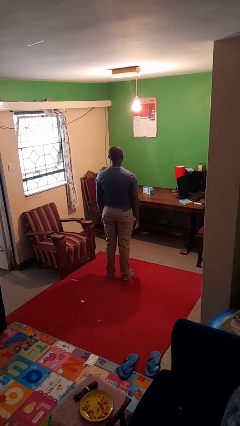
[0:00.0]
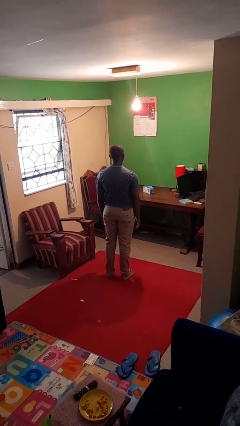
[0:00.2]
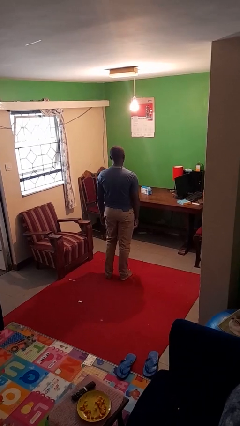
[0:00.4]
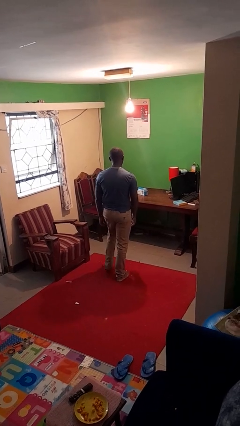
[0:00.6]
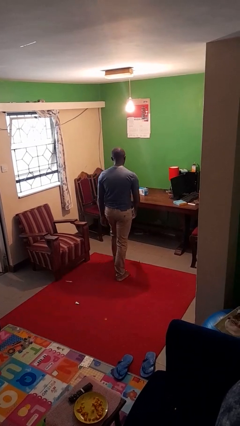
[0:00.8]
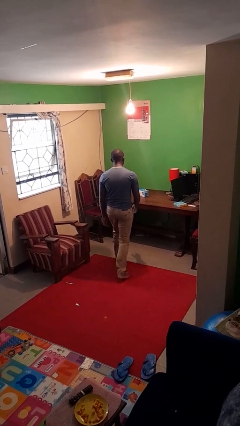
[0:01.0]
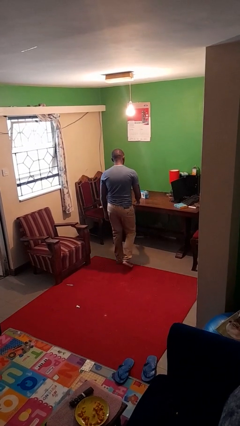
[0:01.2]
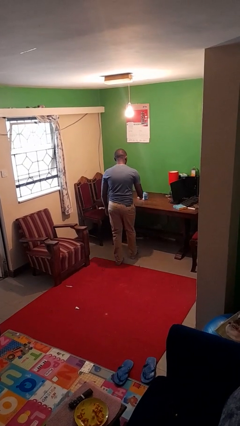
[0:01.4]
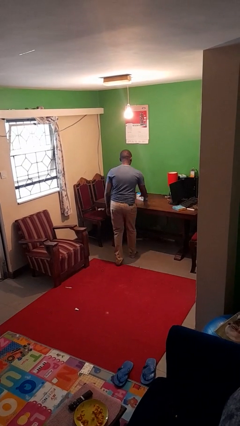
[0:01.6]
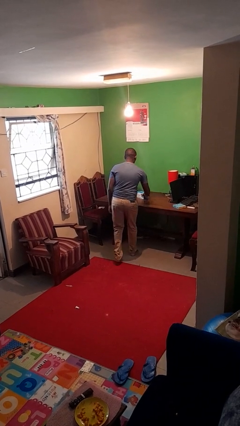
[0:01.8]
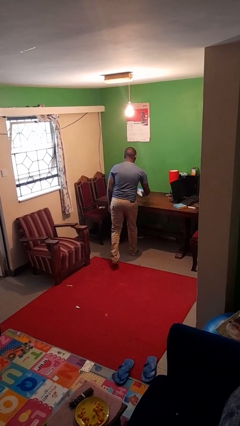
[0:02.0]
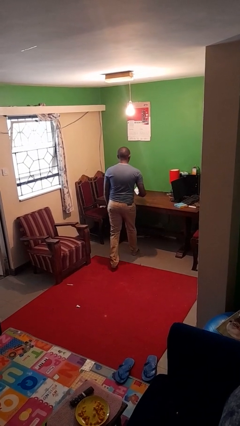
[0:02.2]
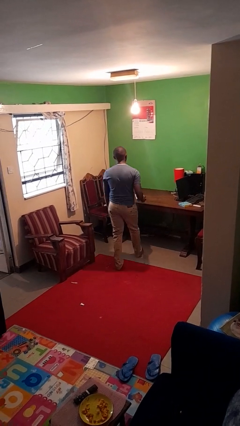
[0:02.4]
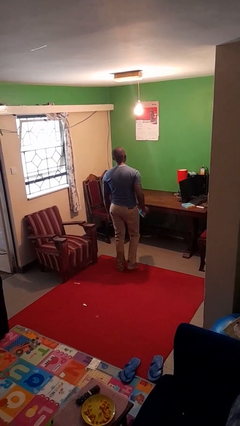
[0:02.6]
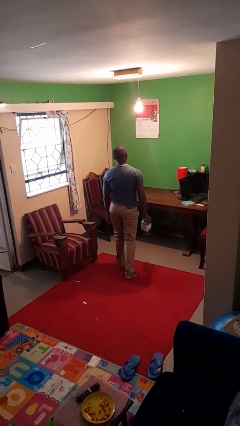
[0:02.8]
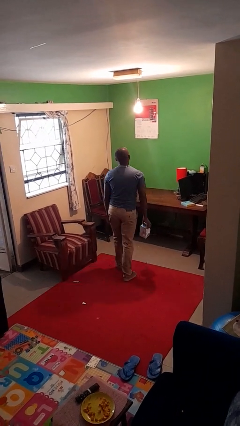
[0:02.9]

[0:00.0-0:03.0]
person picks up object from table

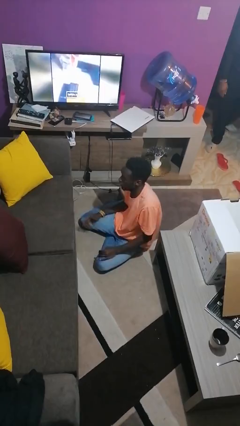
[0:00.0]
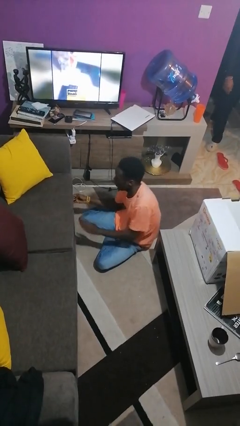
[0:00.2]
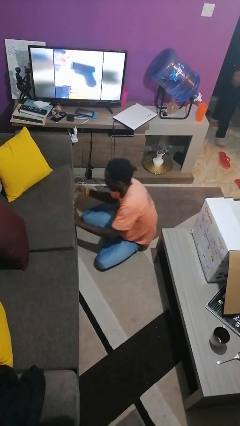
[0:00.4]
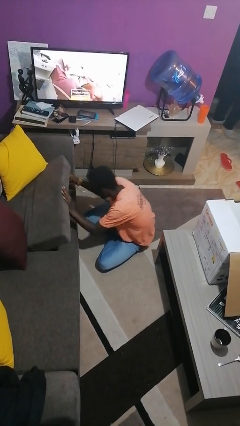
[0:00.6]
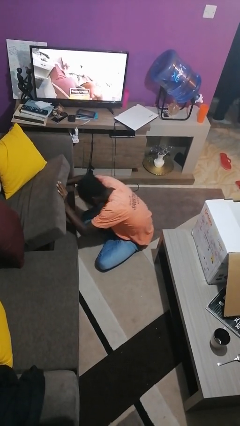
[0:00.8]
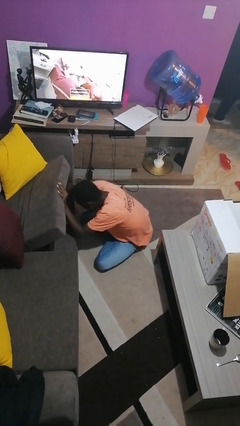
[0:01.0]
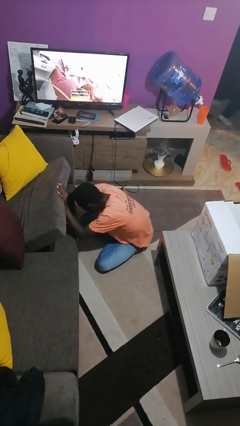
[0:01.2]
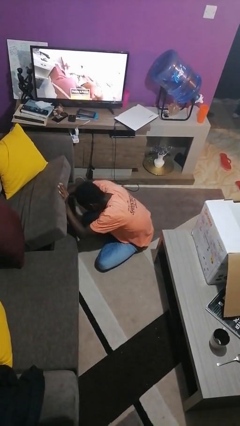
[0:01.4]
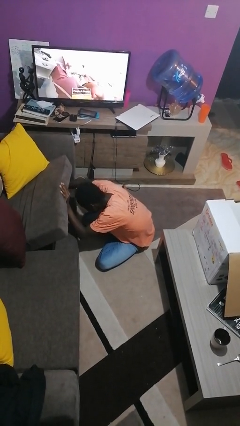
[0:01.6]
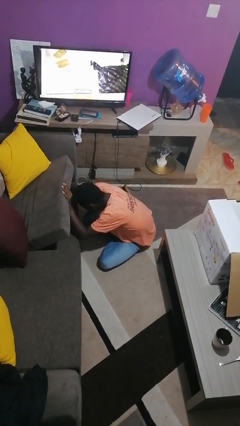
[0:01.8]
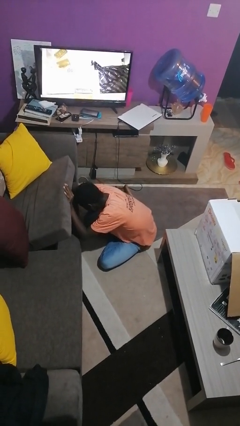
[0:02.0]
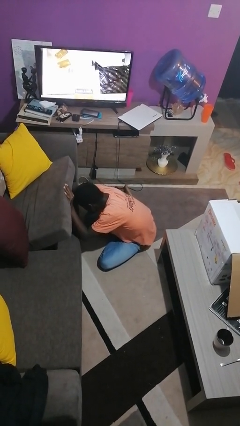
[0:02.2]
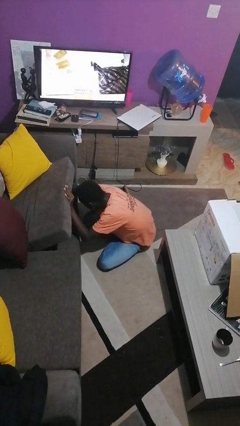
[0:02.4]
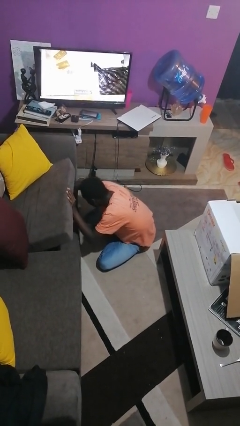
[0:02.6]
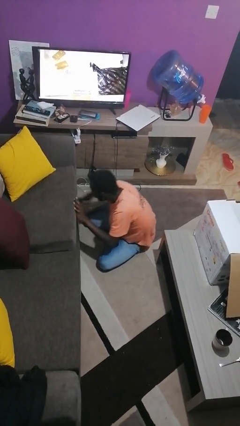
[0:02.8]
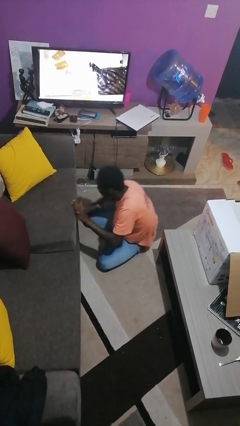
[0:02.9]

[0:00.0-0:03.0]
person searches under couch

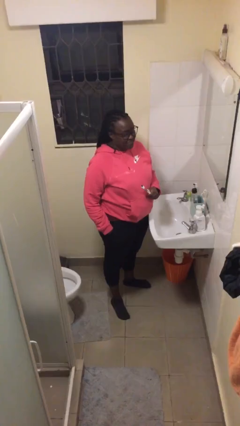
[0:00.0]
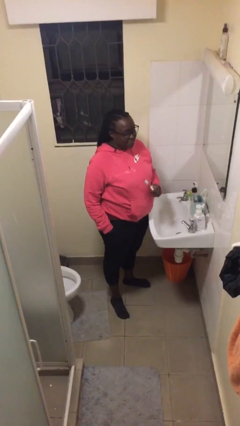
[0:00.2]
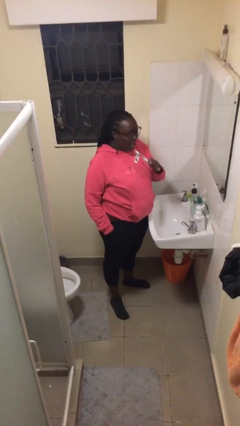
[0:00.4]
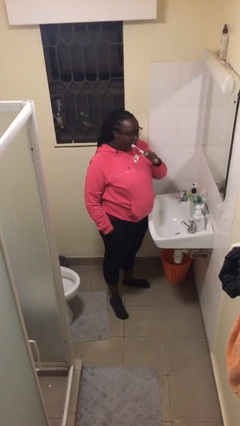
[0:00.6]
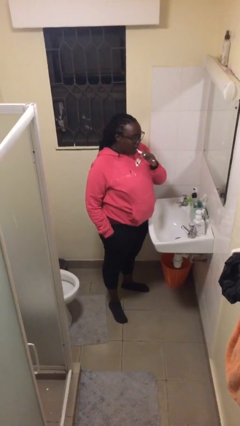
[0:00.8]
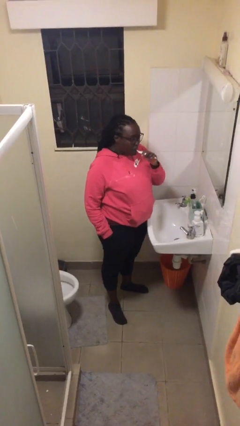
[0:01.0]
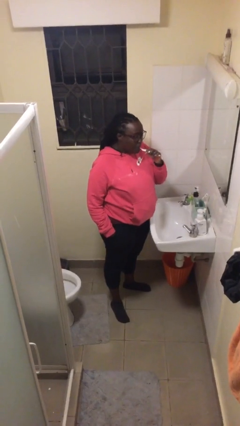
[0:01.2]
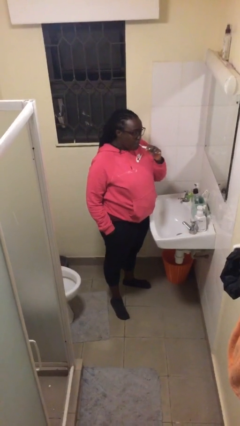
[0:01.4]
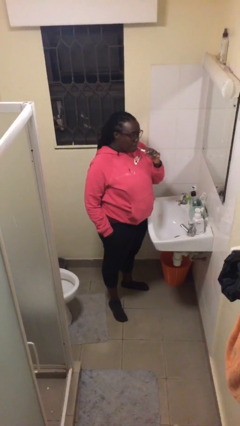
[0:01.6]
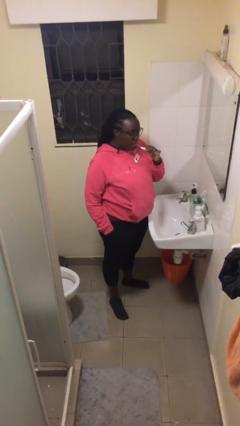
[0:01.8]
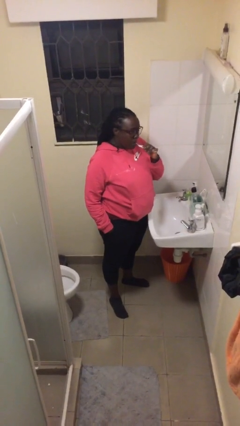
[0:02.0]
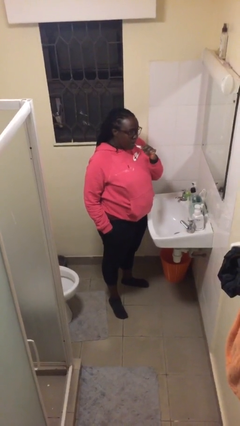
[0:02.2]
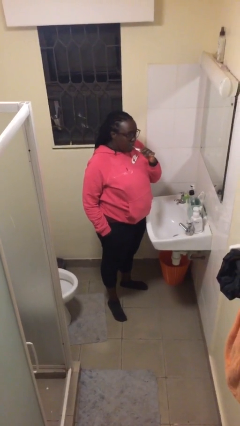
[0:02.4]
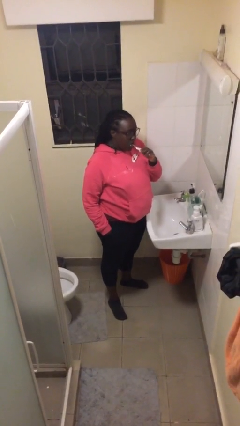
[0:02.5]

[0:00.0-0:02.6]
person brushes teeth

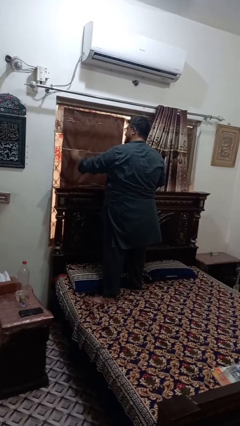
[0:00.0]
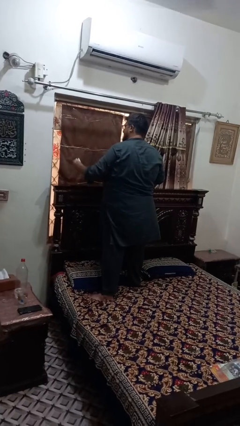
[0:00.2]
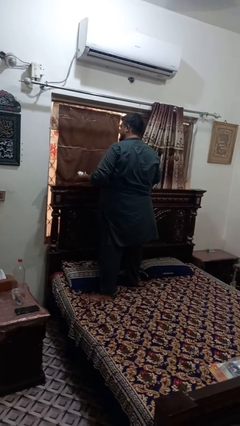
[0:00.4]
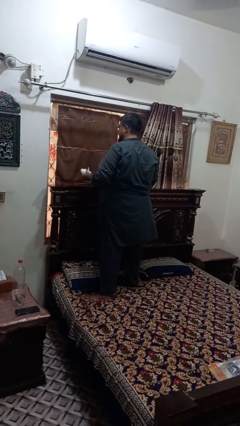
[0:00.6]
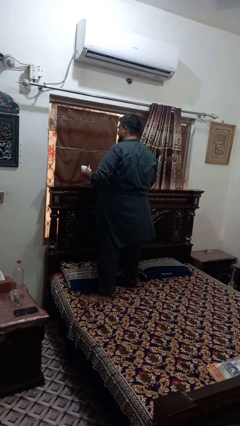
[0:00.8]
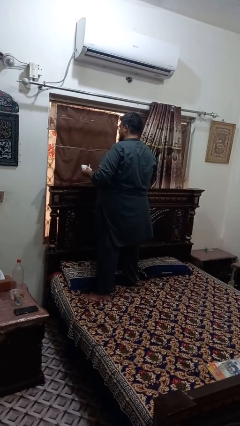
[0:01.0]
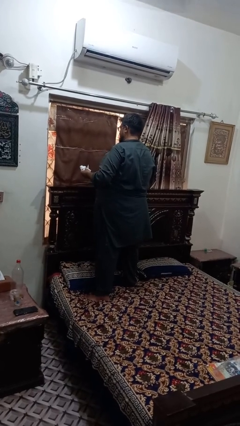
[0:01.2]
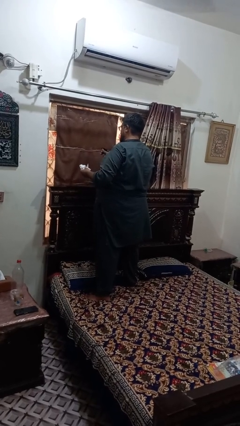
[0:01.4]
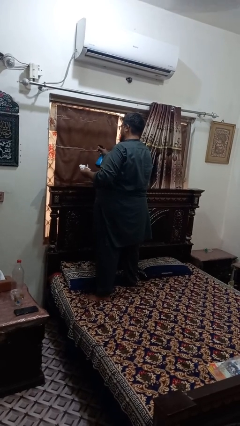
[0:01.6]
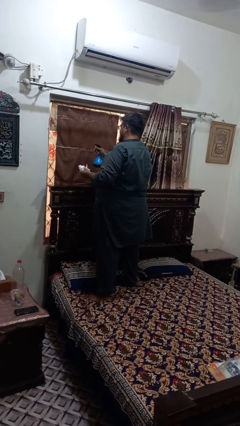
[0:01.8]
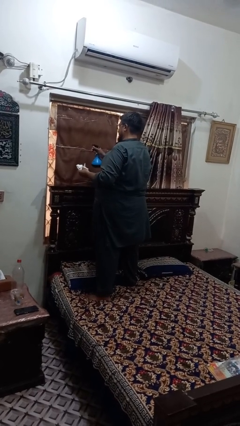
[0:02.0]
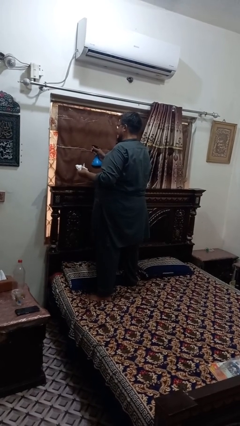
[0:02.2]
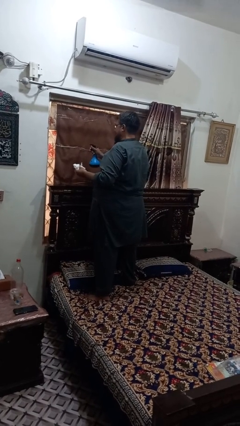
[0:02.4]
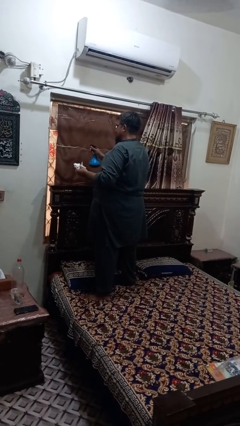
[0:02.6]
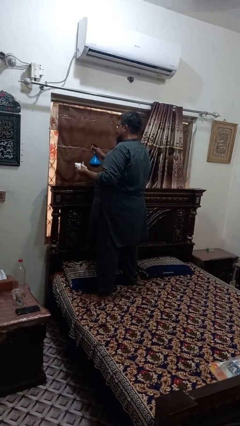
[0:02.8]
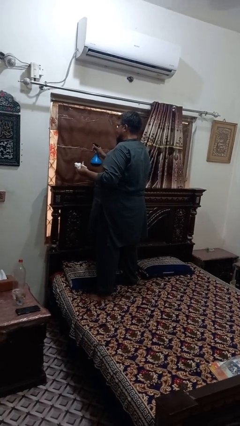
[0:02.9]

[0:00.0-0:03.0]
person sprays from bottle

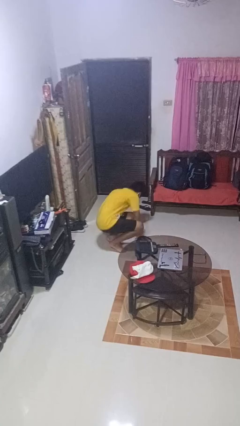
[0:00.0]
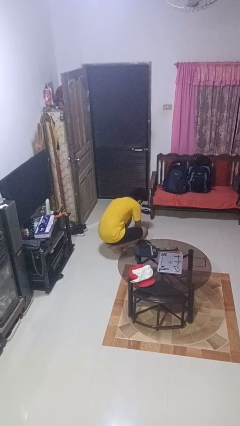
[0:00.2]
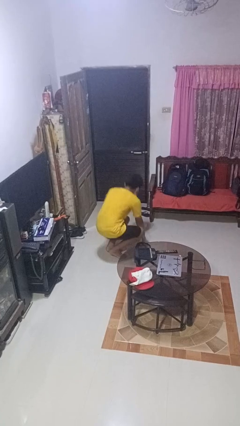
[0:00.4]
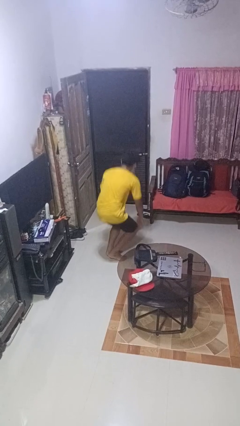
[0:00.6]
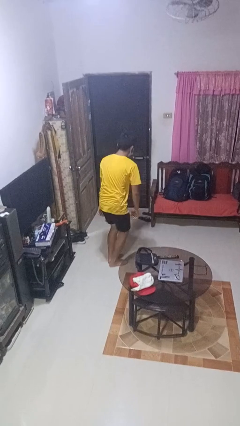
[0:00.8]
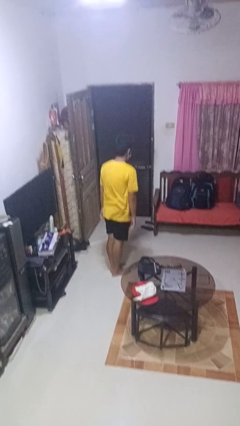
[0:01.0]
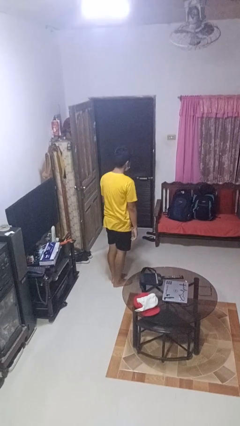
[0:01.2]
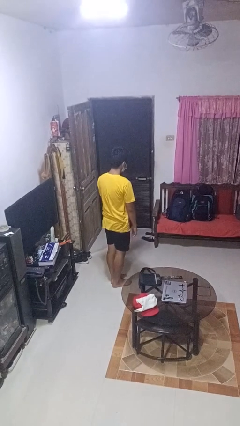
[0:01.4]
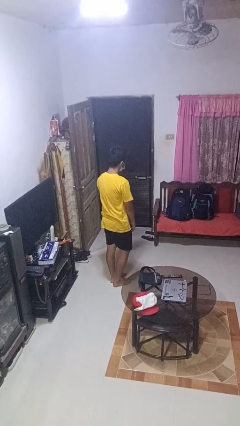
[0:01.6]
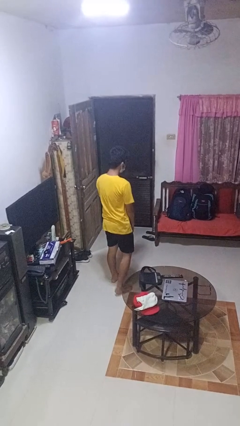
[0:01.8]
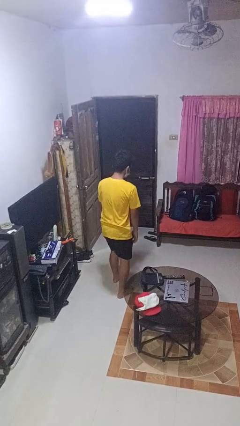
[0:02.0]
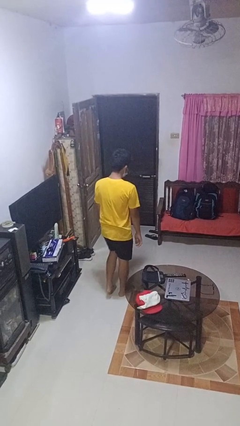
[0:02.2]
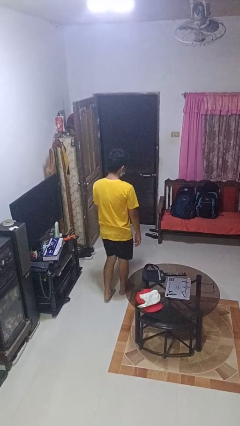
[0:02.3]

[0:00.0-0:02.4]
person stands up from floor

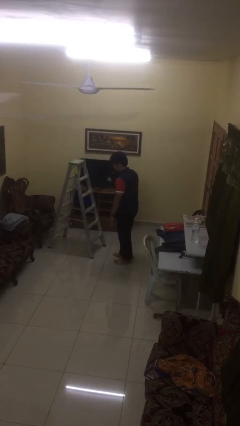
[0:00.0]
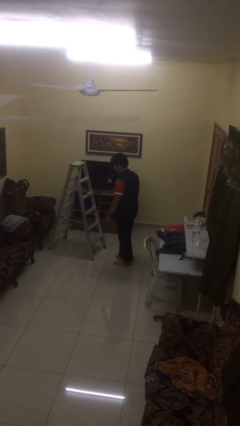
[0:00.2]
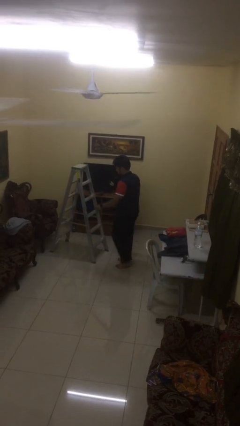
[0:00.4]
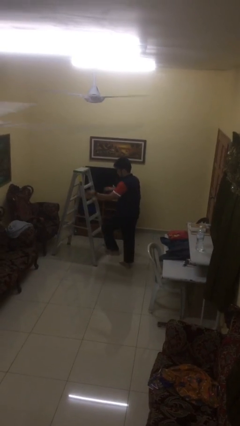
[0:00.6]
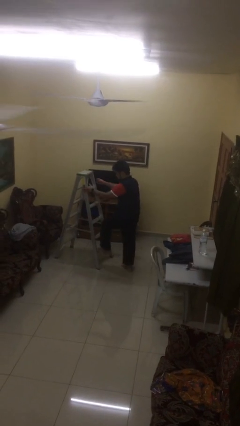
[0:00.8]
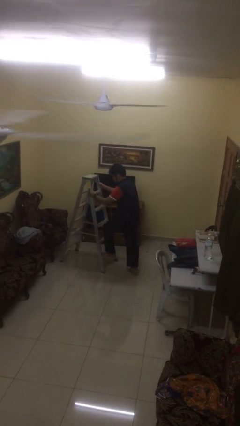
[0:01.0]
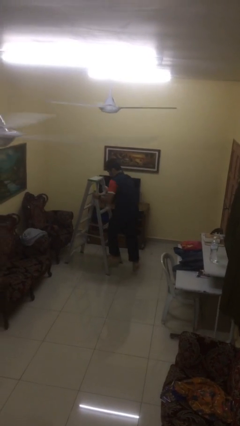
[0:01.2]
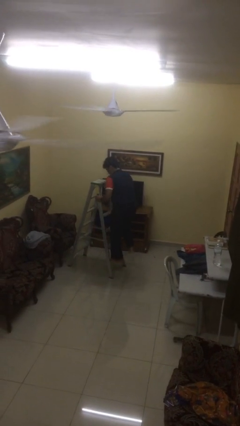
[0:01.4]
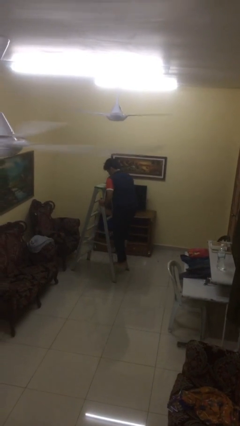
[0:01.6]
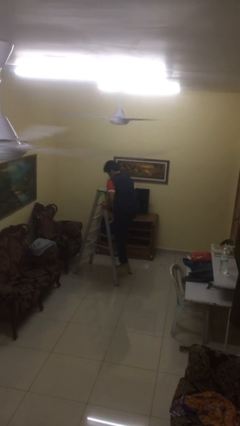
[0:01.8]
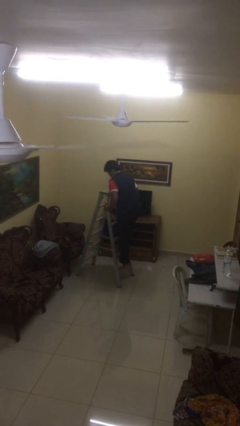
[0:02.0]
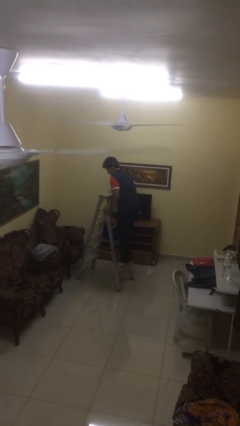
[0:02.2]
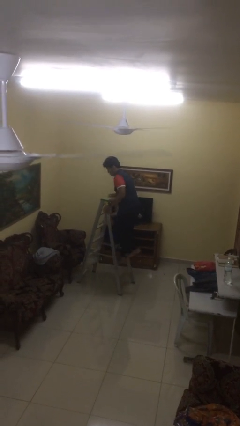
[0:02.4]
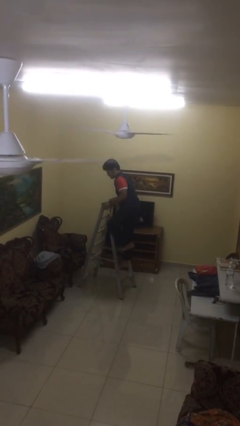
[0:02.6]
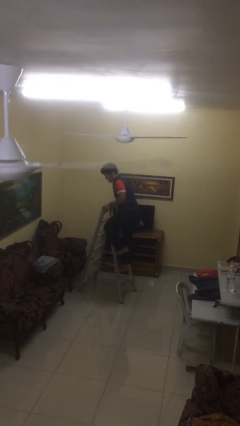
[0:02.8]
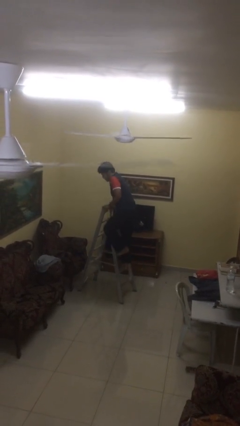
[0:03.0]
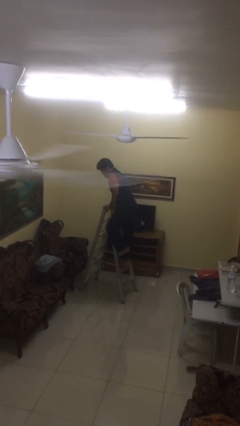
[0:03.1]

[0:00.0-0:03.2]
person climbs up ladder
